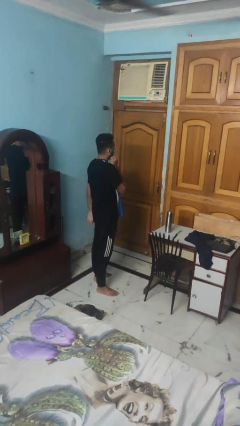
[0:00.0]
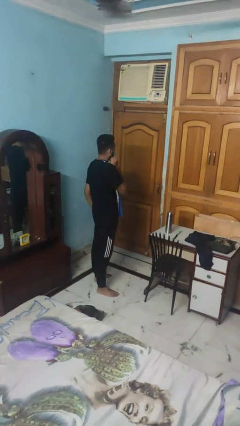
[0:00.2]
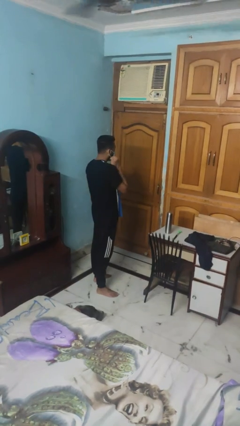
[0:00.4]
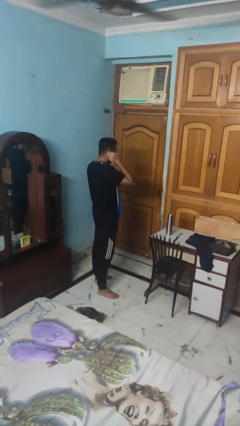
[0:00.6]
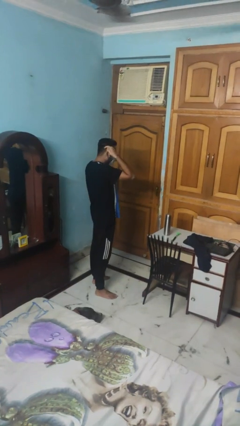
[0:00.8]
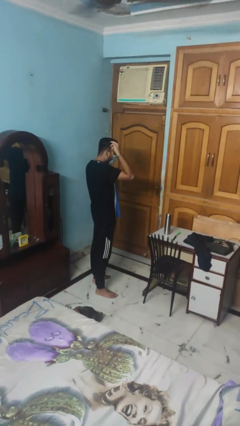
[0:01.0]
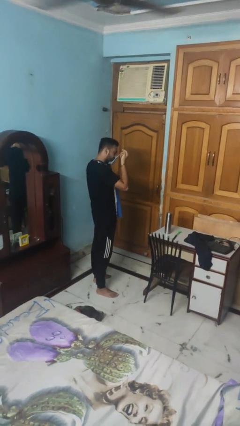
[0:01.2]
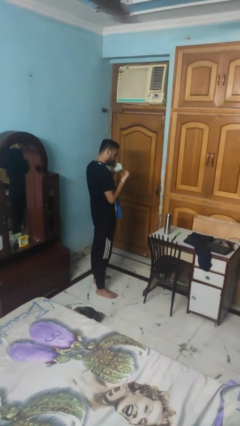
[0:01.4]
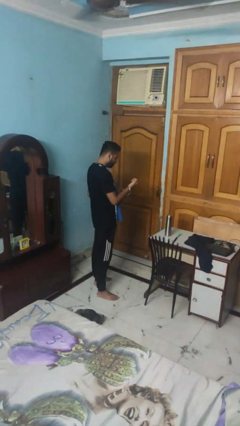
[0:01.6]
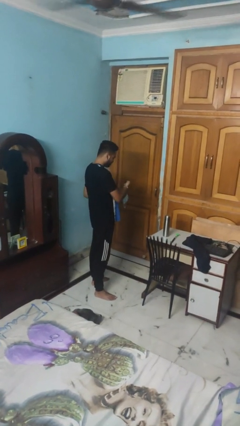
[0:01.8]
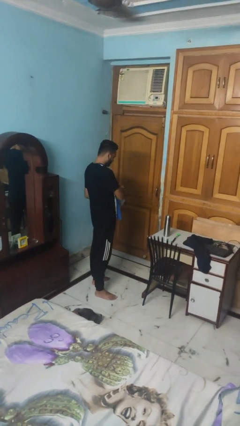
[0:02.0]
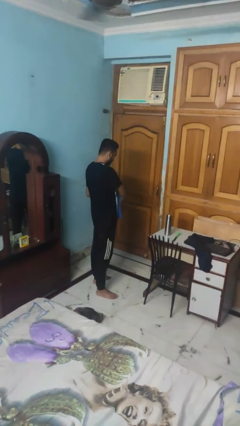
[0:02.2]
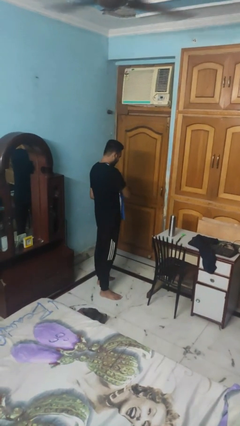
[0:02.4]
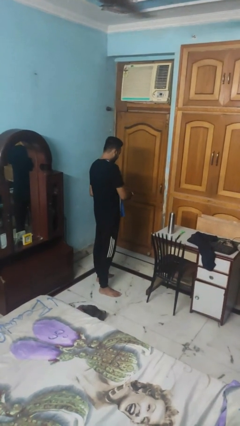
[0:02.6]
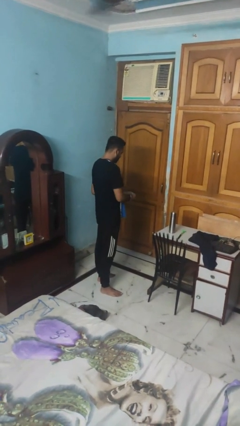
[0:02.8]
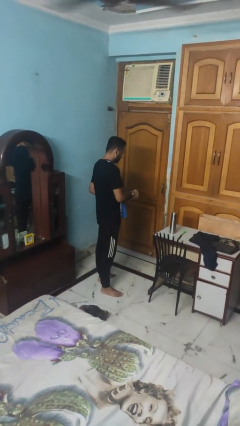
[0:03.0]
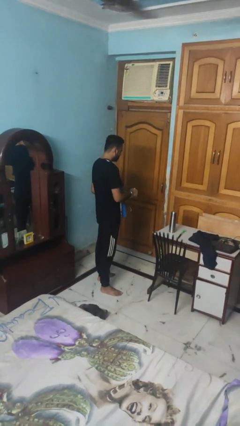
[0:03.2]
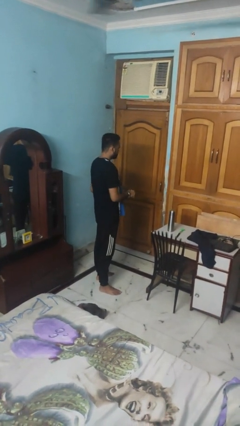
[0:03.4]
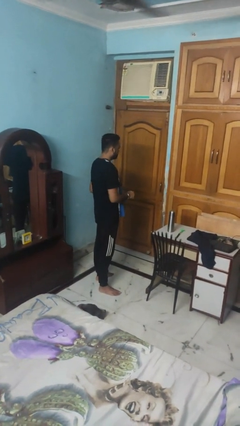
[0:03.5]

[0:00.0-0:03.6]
person takes off facemask

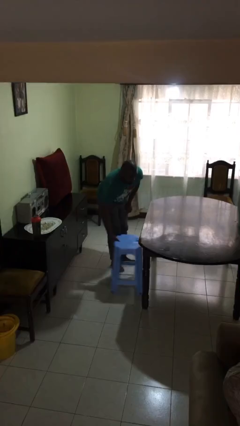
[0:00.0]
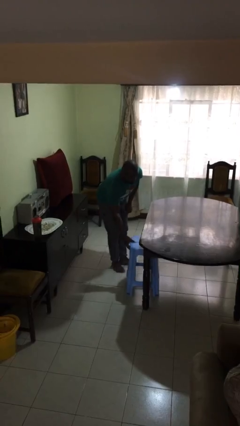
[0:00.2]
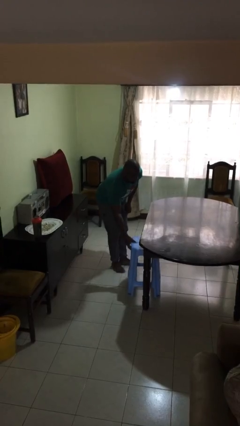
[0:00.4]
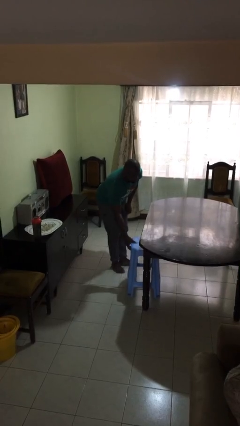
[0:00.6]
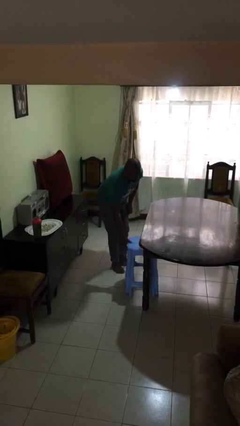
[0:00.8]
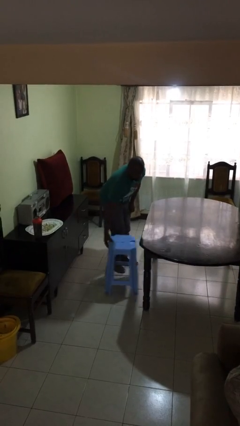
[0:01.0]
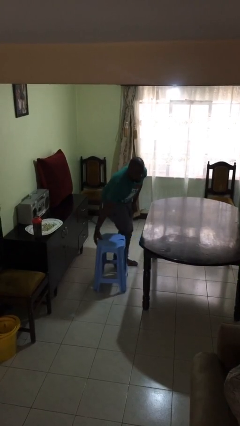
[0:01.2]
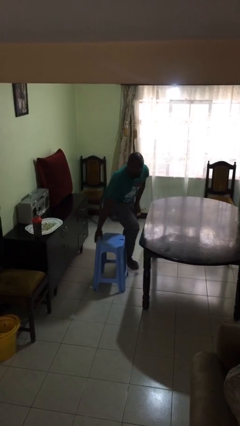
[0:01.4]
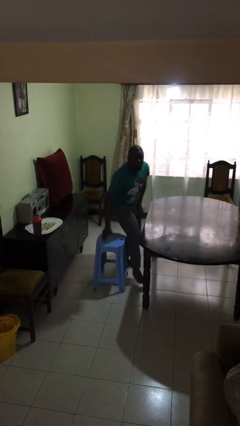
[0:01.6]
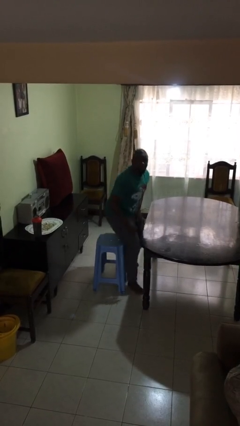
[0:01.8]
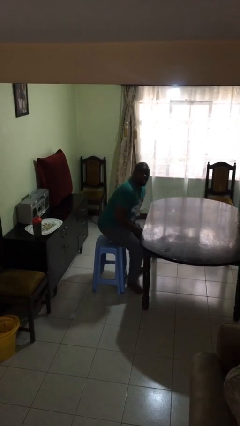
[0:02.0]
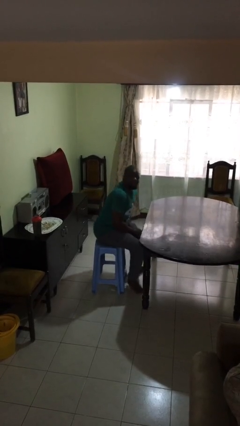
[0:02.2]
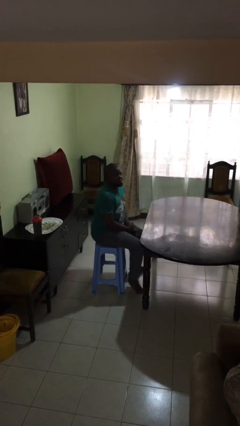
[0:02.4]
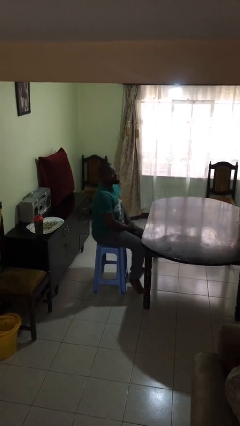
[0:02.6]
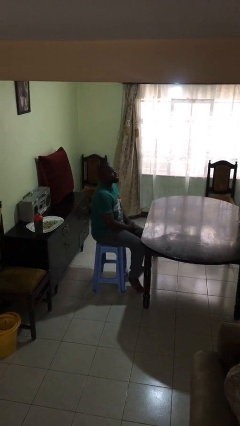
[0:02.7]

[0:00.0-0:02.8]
person sits down

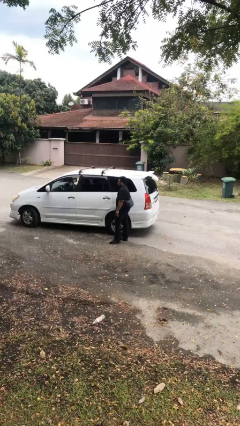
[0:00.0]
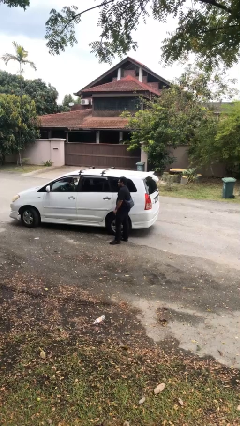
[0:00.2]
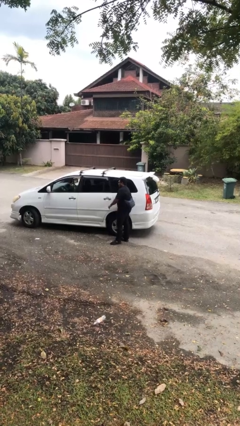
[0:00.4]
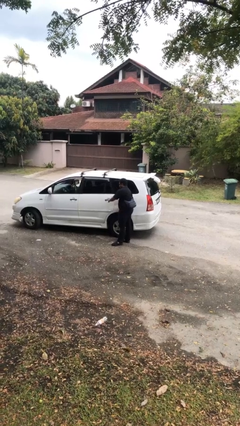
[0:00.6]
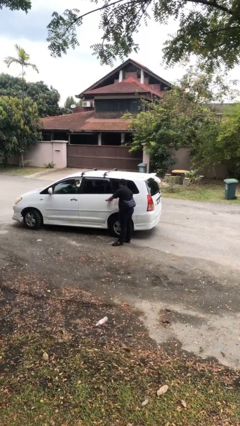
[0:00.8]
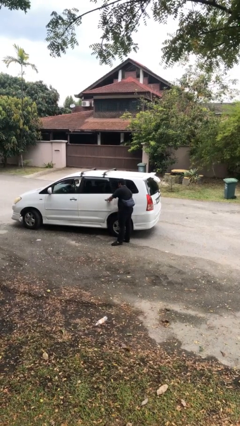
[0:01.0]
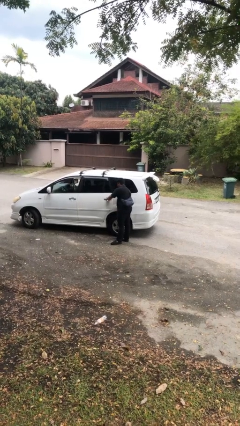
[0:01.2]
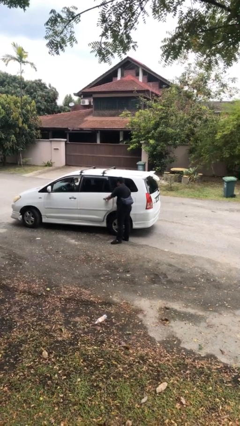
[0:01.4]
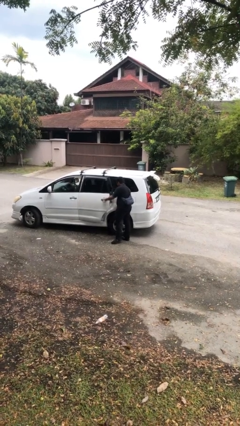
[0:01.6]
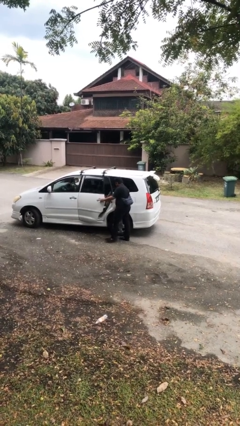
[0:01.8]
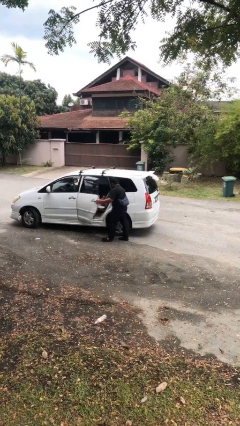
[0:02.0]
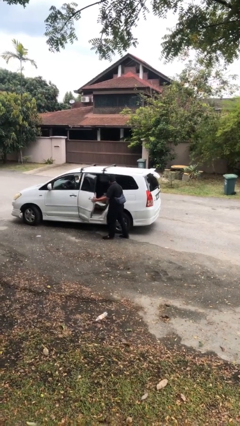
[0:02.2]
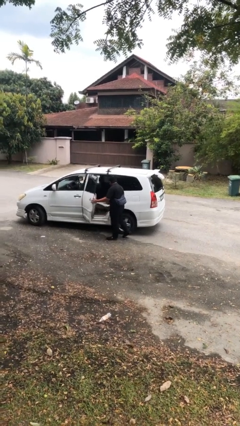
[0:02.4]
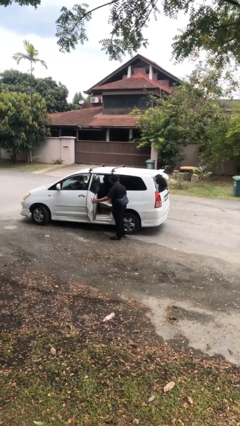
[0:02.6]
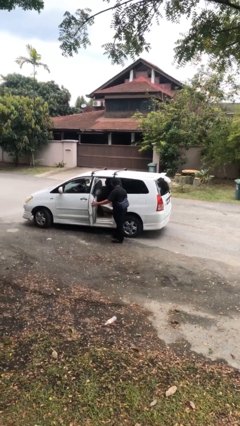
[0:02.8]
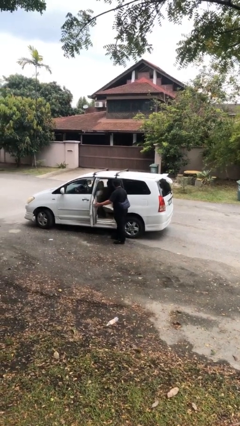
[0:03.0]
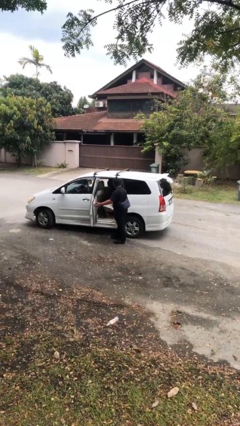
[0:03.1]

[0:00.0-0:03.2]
person opens car door

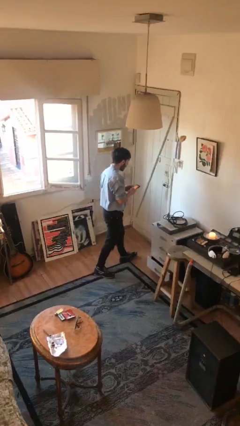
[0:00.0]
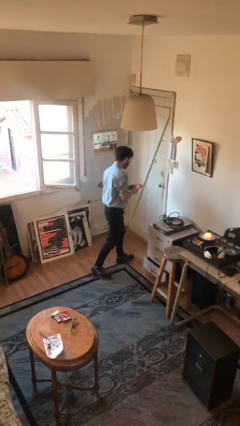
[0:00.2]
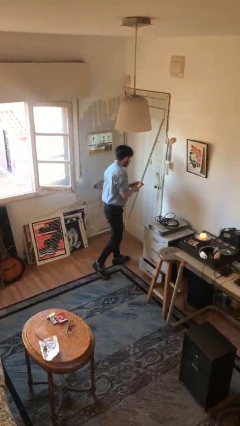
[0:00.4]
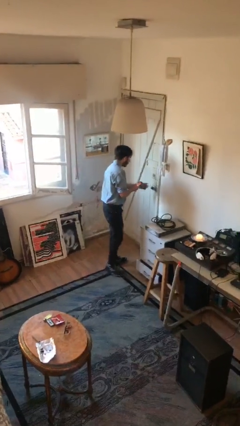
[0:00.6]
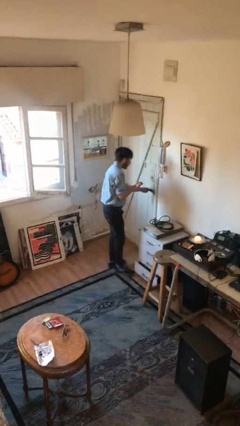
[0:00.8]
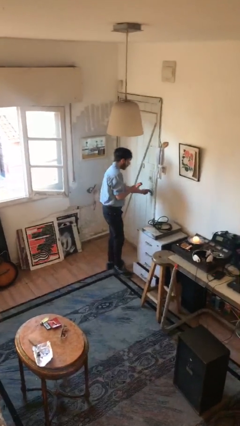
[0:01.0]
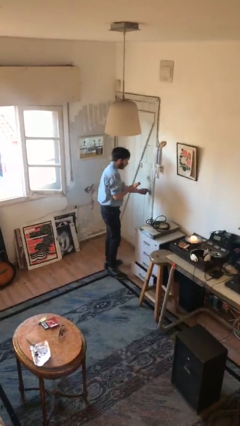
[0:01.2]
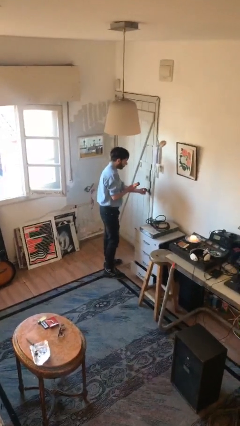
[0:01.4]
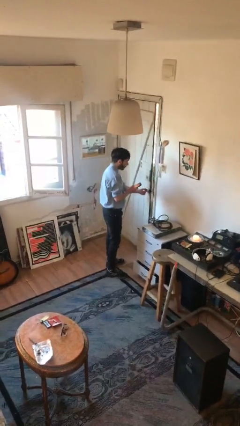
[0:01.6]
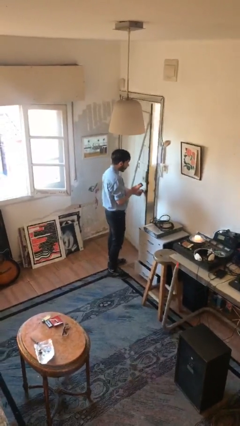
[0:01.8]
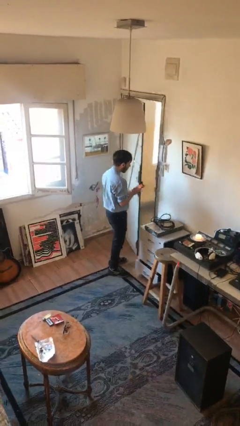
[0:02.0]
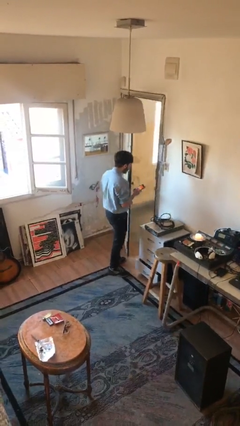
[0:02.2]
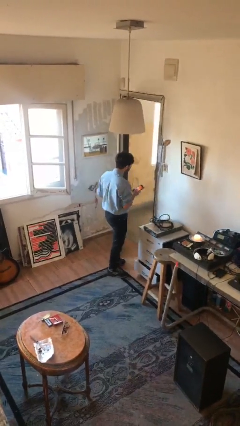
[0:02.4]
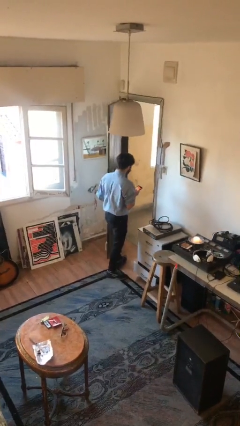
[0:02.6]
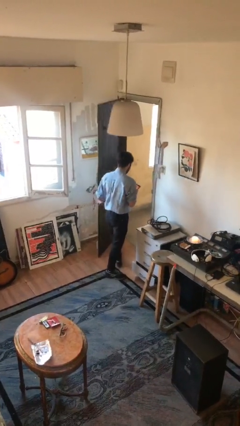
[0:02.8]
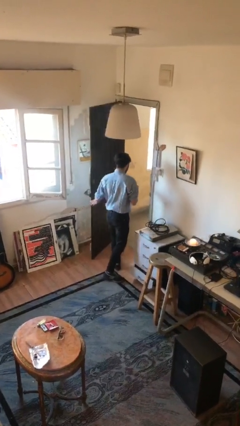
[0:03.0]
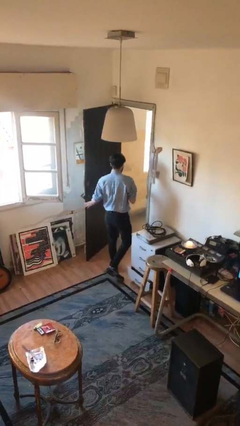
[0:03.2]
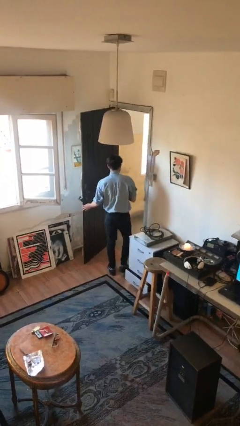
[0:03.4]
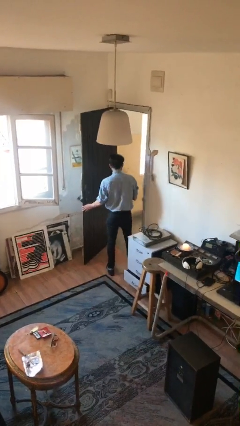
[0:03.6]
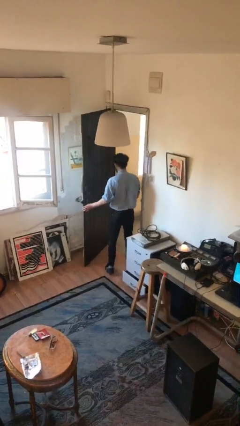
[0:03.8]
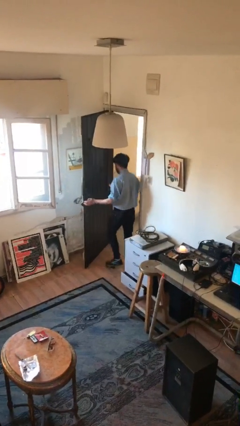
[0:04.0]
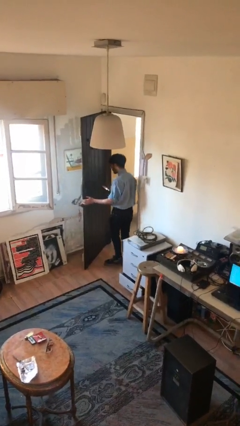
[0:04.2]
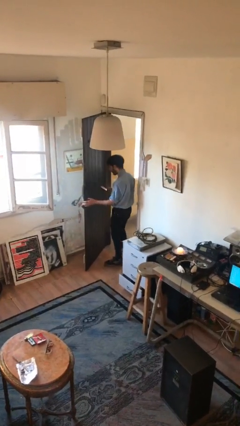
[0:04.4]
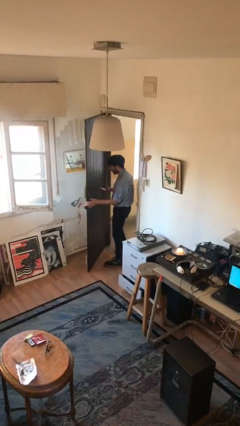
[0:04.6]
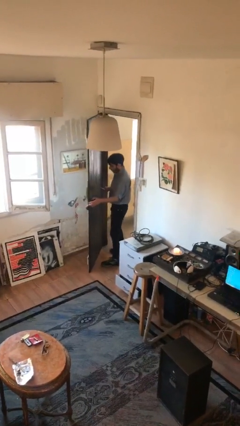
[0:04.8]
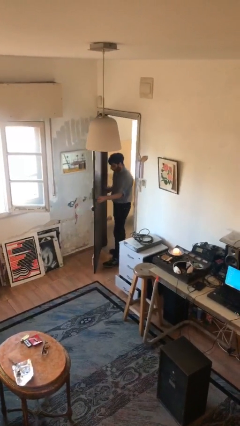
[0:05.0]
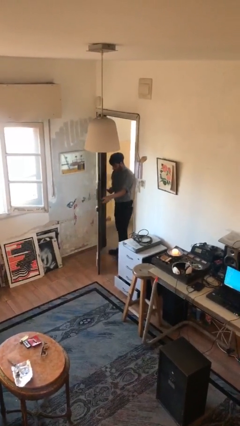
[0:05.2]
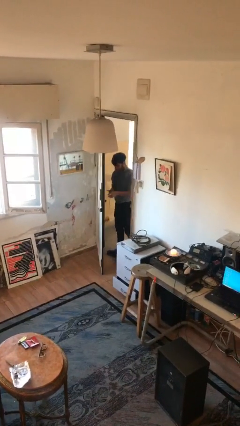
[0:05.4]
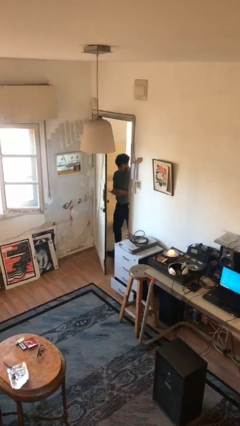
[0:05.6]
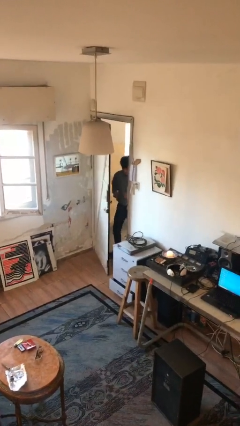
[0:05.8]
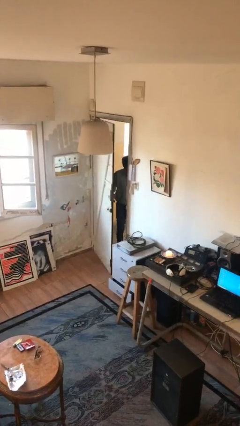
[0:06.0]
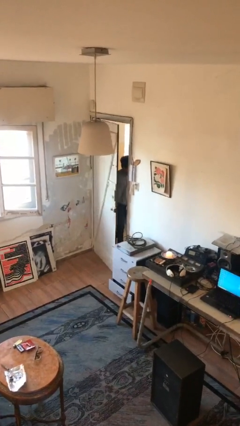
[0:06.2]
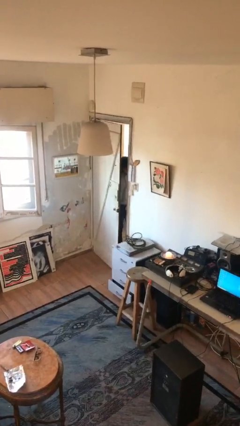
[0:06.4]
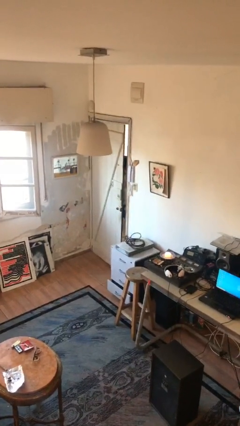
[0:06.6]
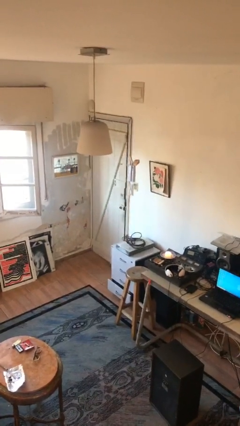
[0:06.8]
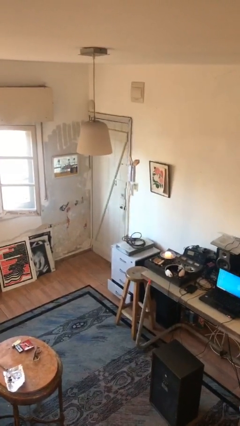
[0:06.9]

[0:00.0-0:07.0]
person texts on phone

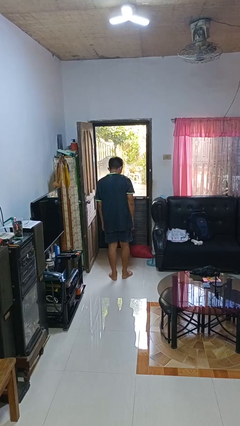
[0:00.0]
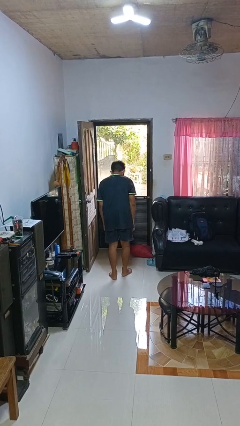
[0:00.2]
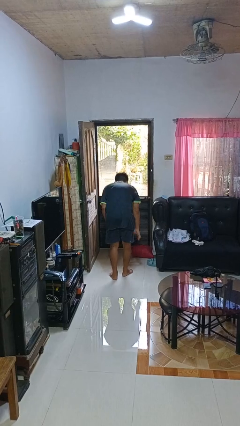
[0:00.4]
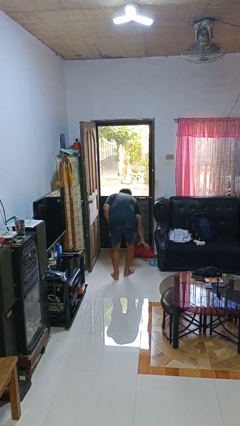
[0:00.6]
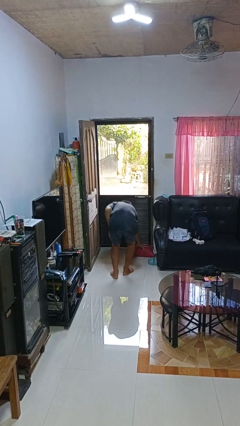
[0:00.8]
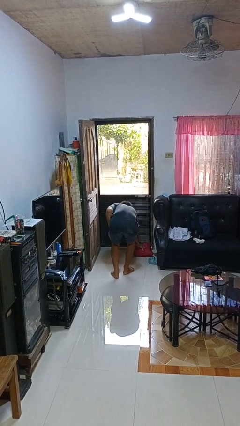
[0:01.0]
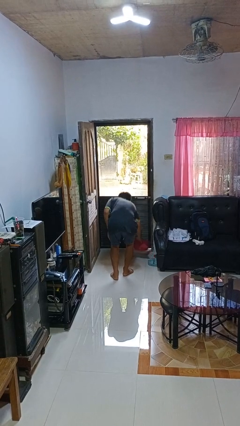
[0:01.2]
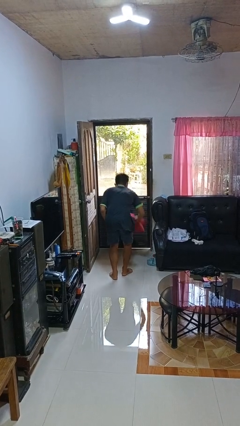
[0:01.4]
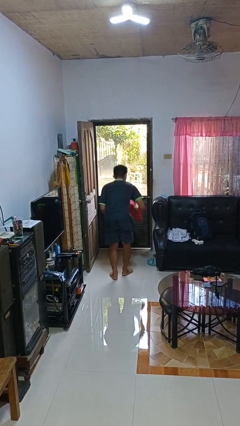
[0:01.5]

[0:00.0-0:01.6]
person picks up object from floor
